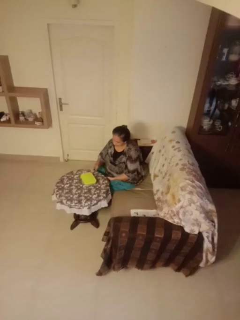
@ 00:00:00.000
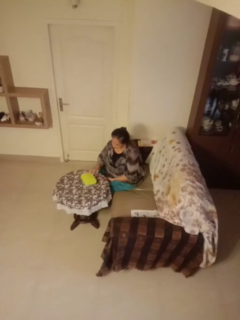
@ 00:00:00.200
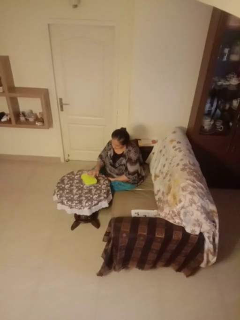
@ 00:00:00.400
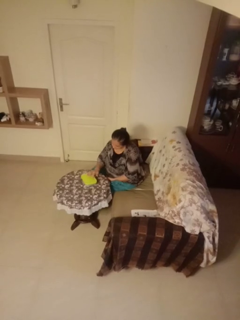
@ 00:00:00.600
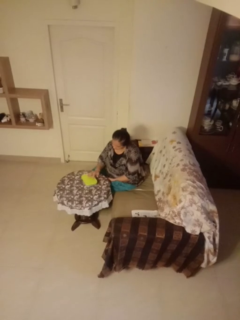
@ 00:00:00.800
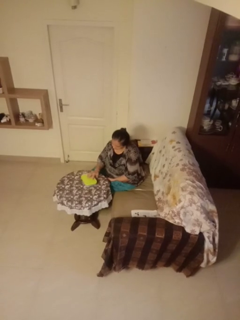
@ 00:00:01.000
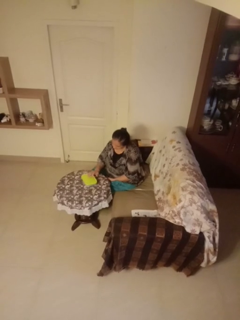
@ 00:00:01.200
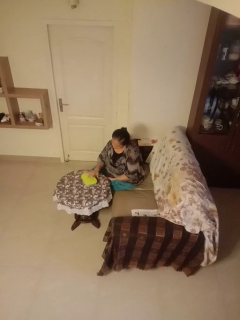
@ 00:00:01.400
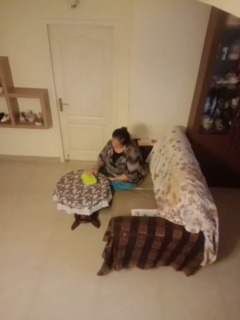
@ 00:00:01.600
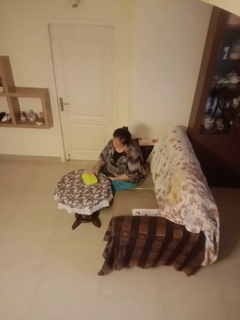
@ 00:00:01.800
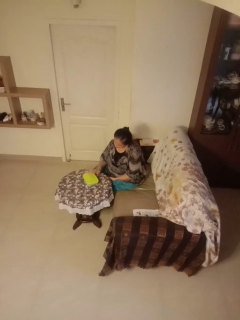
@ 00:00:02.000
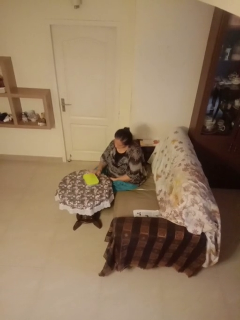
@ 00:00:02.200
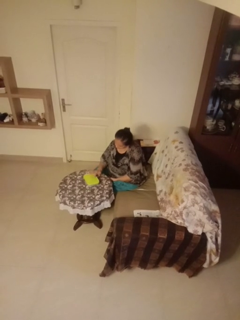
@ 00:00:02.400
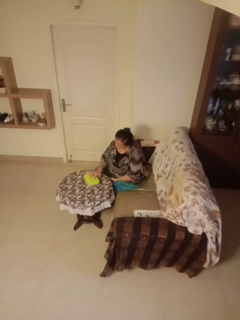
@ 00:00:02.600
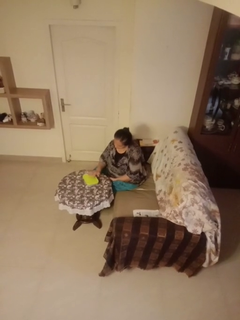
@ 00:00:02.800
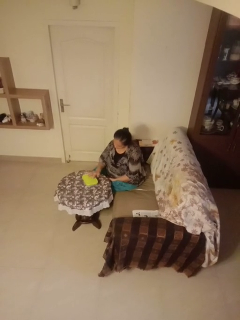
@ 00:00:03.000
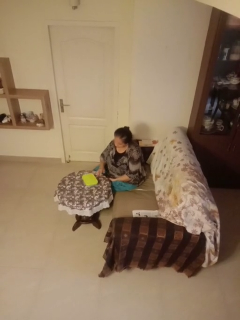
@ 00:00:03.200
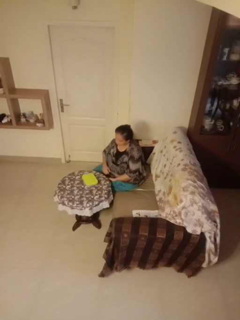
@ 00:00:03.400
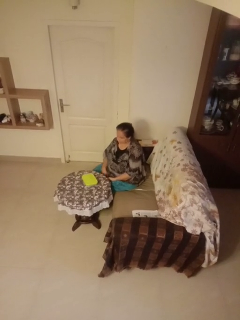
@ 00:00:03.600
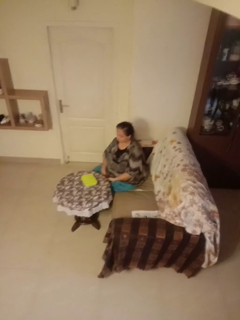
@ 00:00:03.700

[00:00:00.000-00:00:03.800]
person taps object with finger

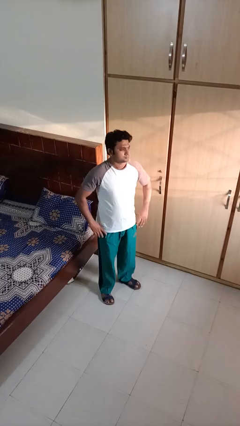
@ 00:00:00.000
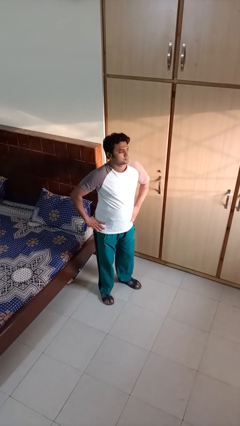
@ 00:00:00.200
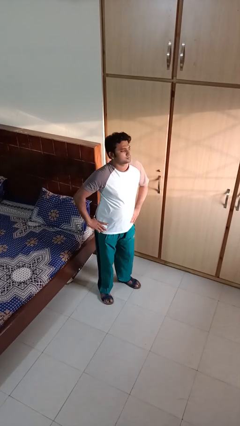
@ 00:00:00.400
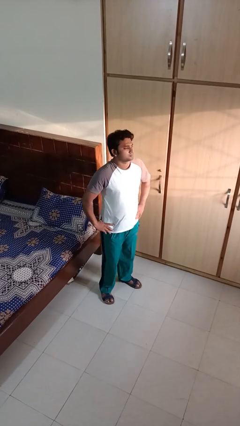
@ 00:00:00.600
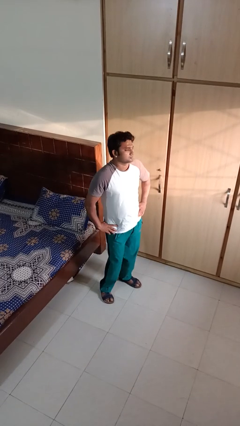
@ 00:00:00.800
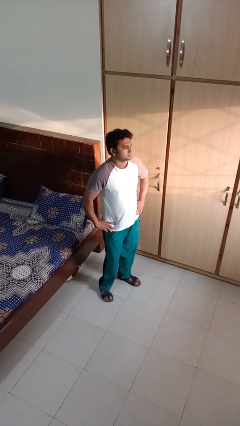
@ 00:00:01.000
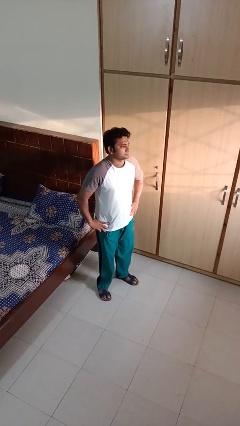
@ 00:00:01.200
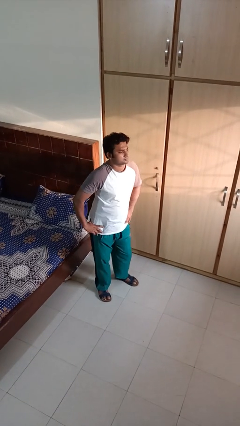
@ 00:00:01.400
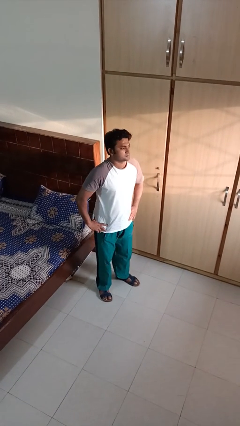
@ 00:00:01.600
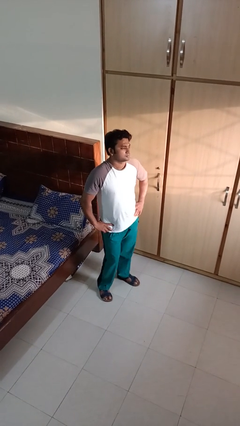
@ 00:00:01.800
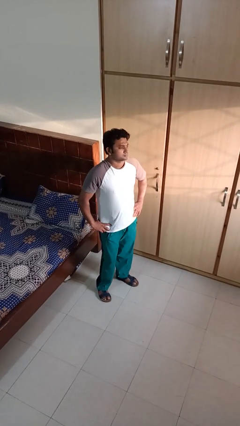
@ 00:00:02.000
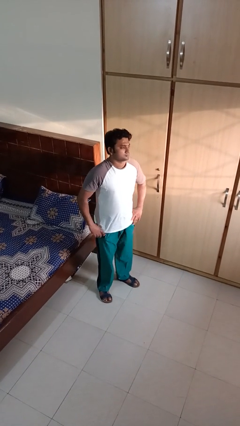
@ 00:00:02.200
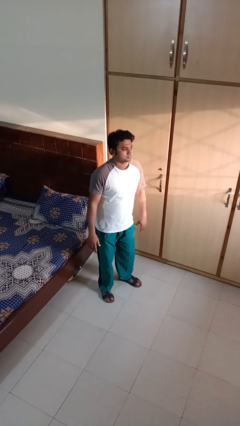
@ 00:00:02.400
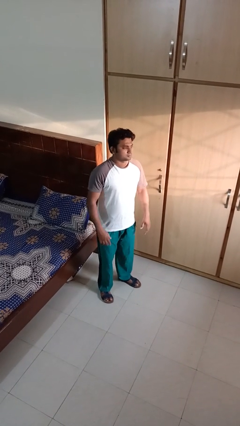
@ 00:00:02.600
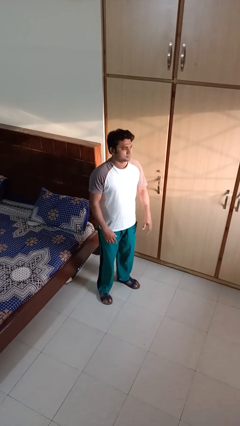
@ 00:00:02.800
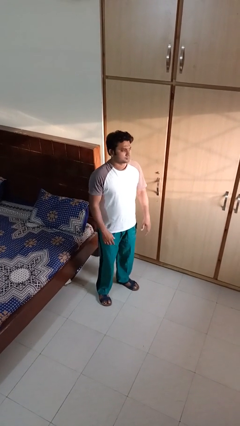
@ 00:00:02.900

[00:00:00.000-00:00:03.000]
person wiggles hips

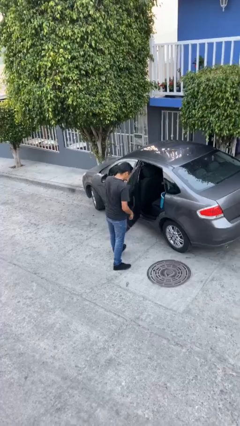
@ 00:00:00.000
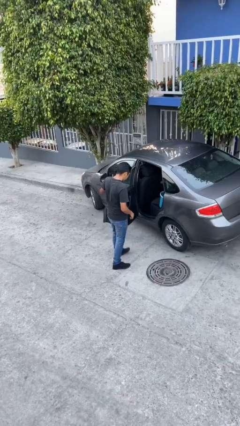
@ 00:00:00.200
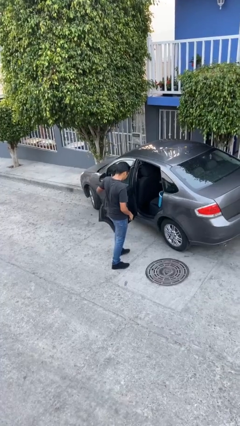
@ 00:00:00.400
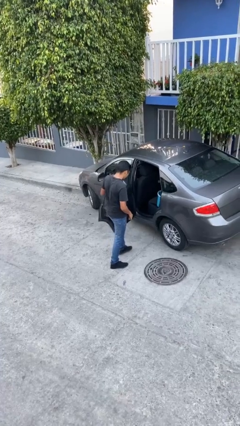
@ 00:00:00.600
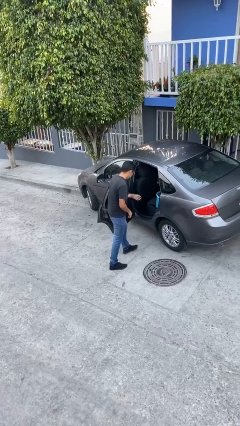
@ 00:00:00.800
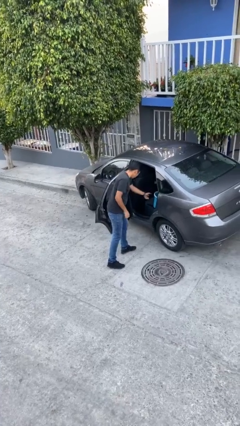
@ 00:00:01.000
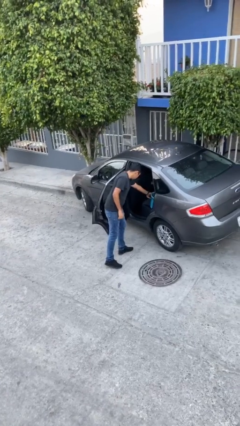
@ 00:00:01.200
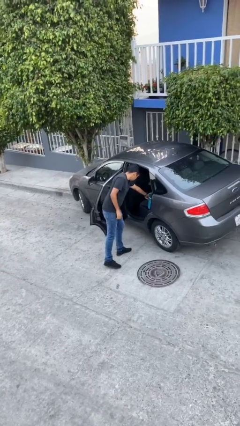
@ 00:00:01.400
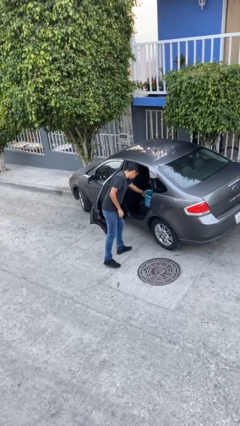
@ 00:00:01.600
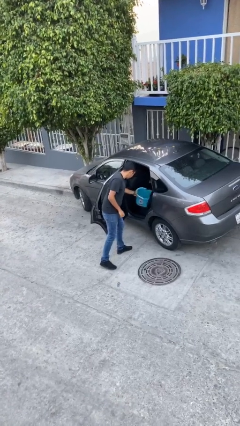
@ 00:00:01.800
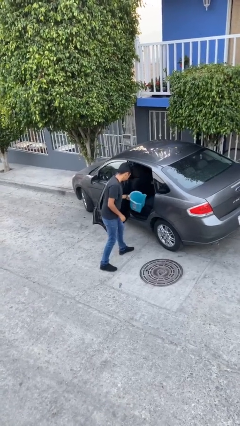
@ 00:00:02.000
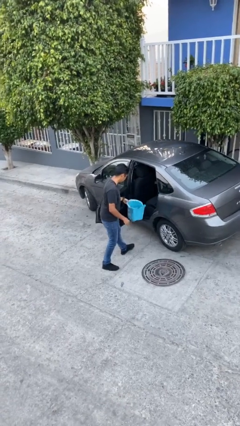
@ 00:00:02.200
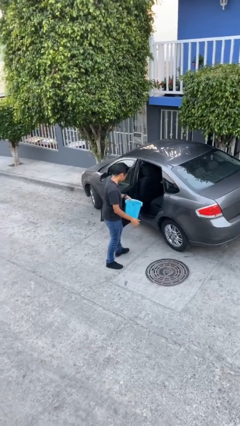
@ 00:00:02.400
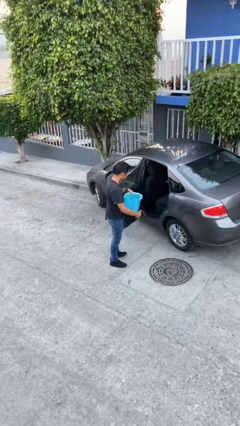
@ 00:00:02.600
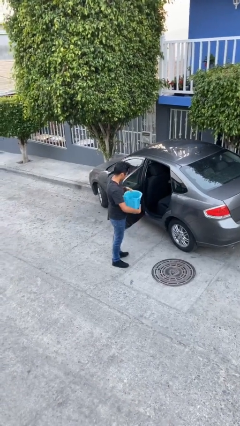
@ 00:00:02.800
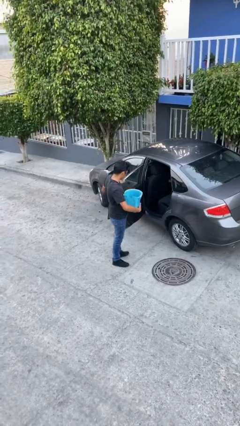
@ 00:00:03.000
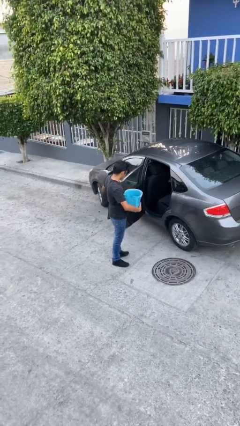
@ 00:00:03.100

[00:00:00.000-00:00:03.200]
person unloads car

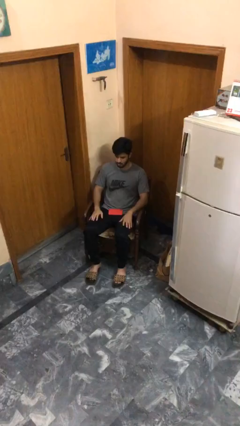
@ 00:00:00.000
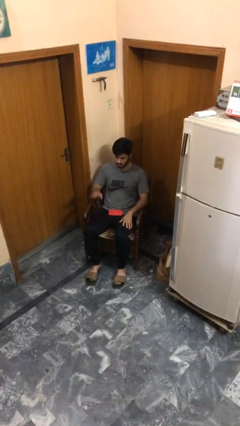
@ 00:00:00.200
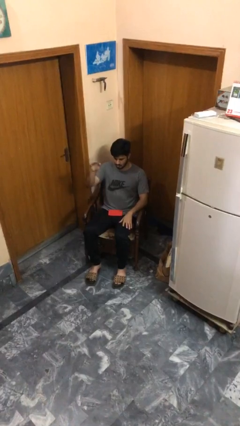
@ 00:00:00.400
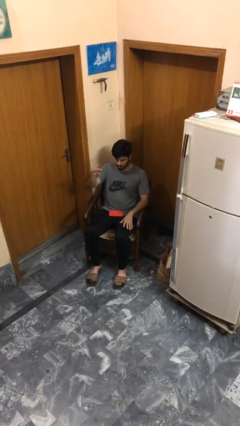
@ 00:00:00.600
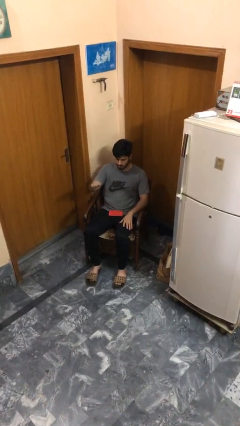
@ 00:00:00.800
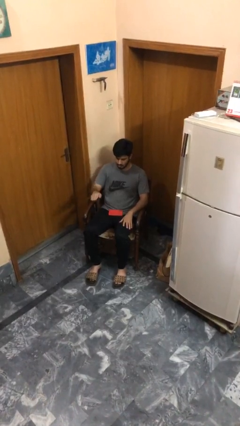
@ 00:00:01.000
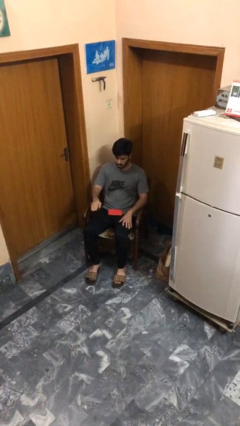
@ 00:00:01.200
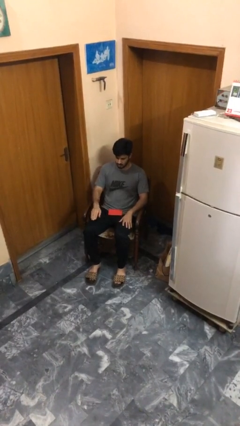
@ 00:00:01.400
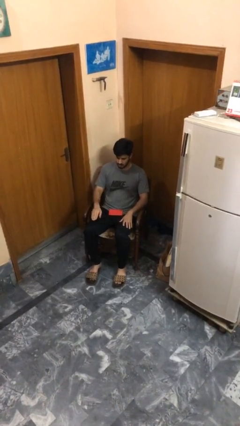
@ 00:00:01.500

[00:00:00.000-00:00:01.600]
person gestures swipe down

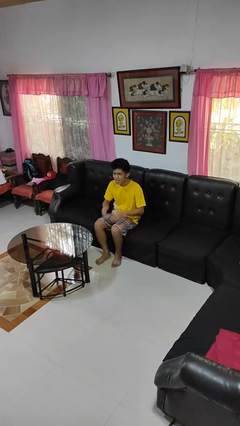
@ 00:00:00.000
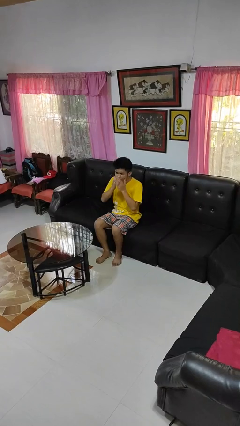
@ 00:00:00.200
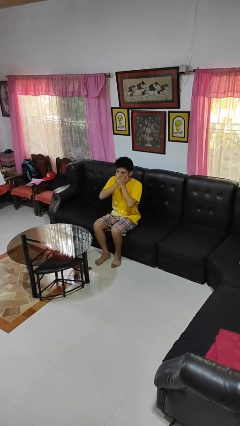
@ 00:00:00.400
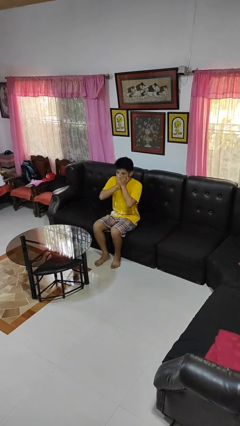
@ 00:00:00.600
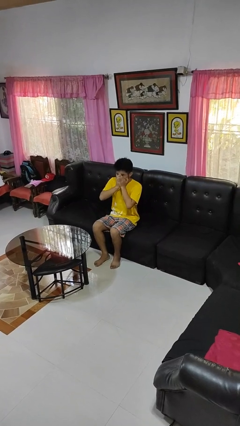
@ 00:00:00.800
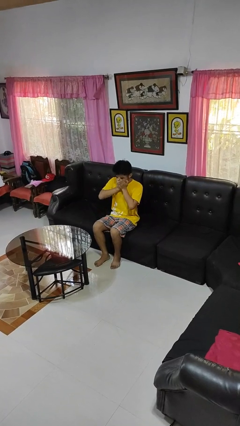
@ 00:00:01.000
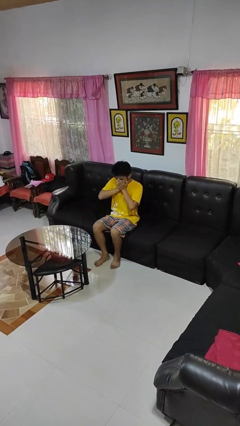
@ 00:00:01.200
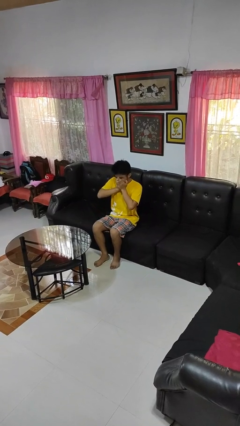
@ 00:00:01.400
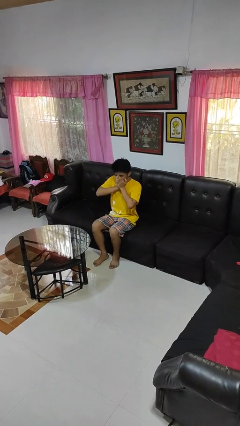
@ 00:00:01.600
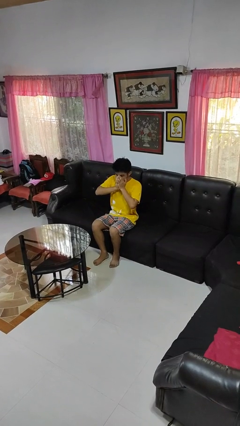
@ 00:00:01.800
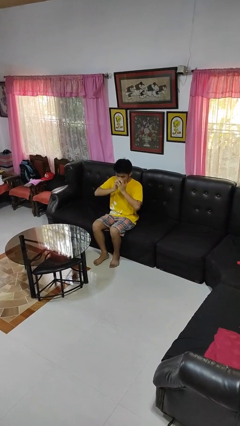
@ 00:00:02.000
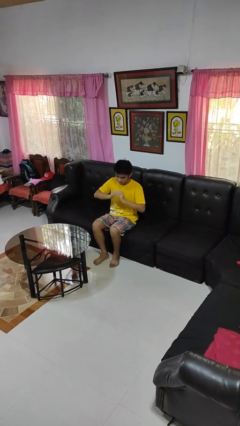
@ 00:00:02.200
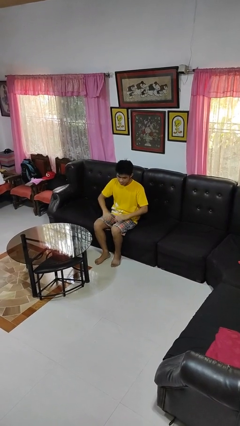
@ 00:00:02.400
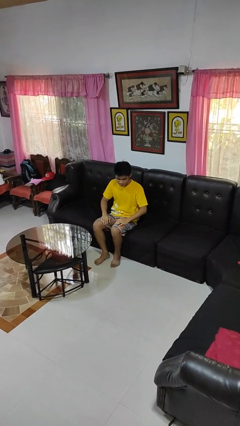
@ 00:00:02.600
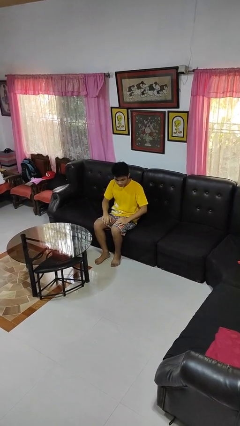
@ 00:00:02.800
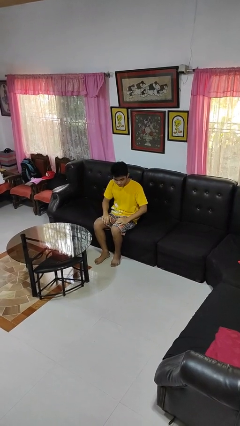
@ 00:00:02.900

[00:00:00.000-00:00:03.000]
person yawns

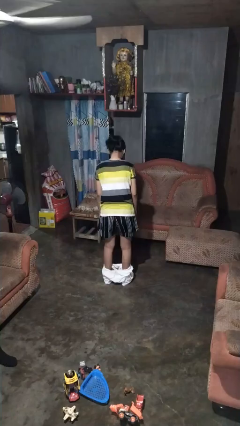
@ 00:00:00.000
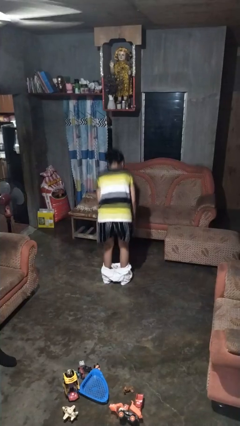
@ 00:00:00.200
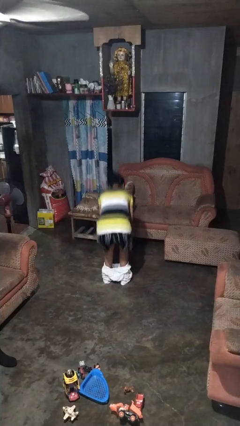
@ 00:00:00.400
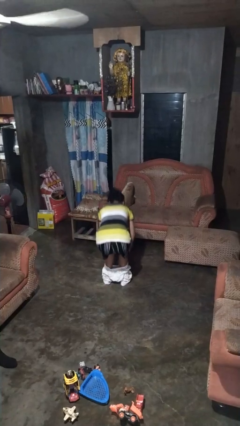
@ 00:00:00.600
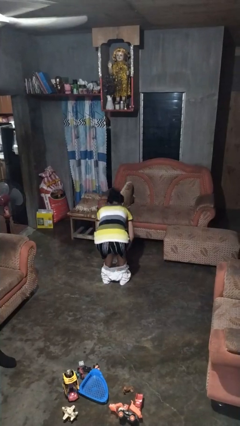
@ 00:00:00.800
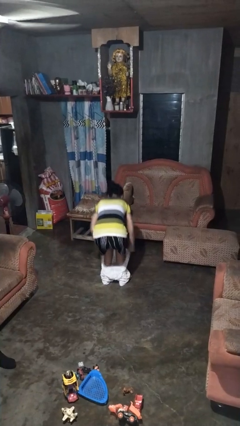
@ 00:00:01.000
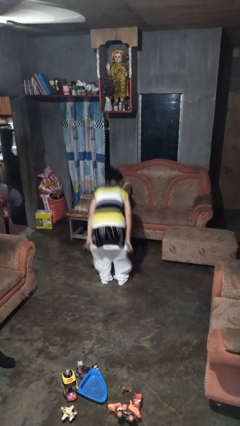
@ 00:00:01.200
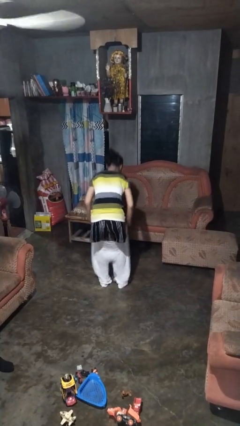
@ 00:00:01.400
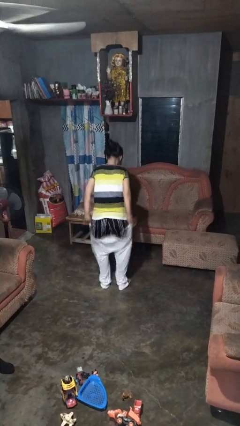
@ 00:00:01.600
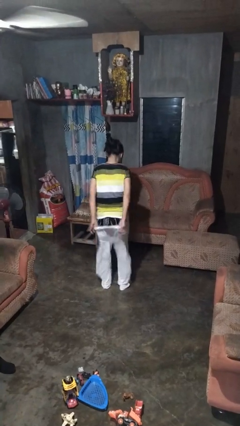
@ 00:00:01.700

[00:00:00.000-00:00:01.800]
person puts on pants

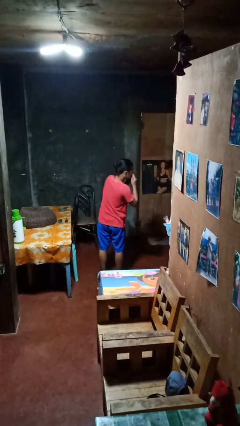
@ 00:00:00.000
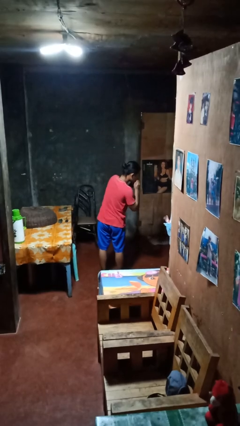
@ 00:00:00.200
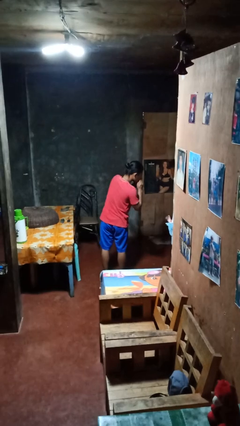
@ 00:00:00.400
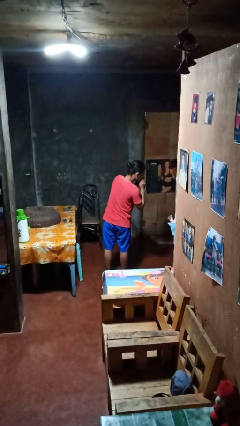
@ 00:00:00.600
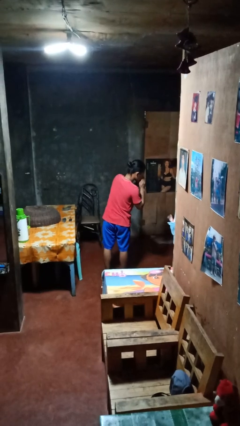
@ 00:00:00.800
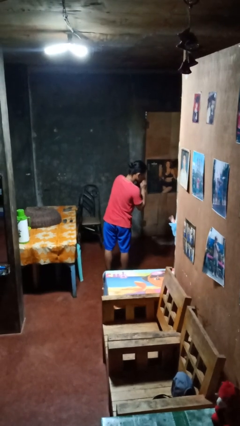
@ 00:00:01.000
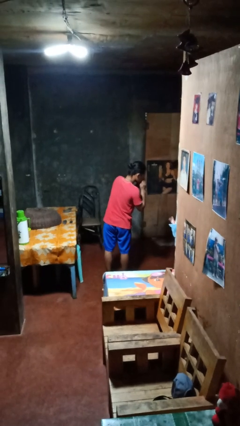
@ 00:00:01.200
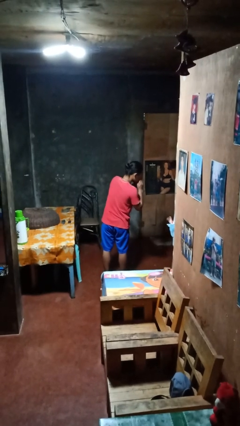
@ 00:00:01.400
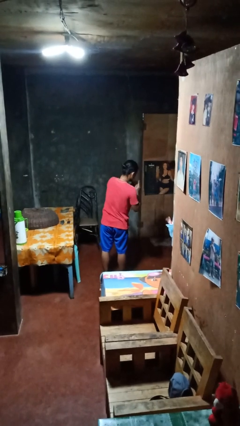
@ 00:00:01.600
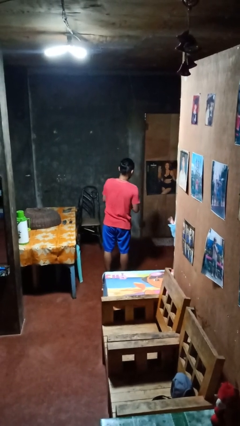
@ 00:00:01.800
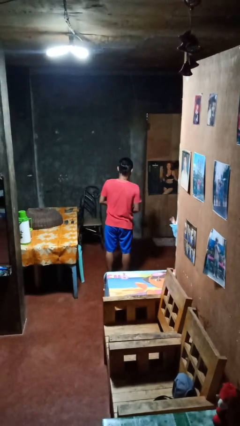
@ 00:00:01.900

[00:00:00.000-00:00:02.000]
person blows nose
